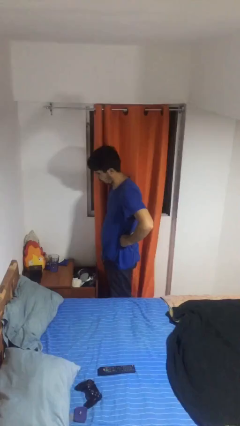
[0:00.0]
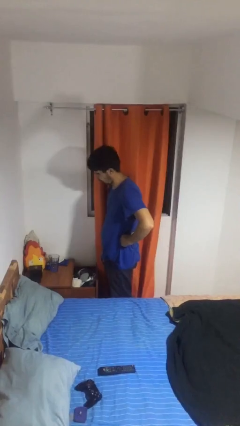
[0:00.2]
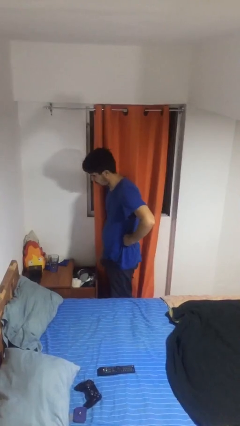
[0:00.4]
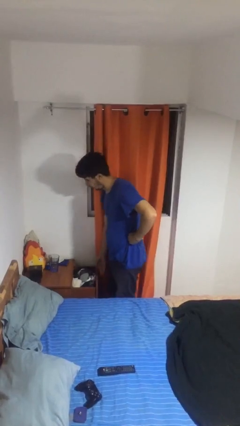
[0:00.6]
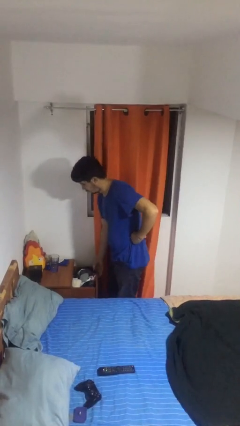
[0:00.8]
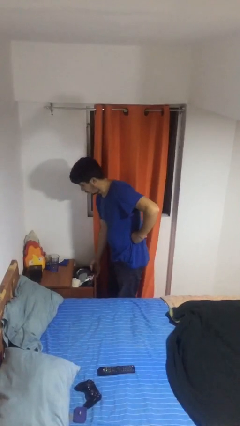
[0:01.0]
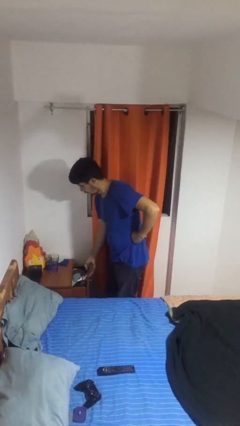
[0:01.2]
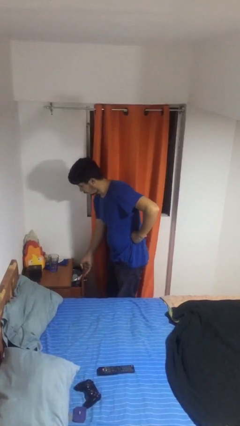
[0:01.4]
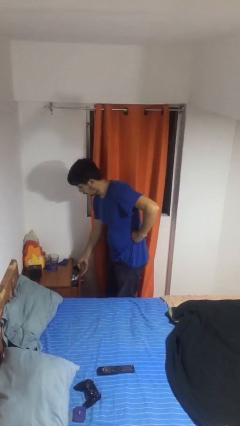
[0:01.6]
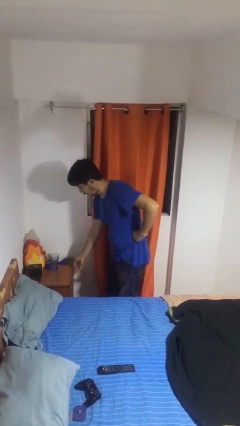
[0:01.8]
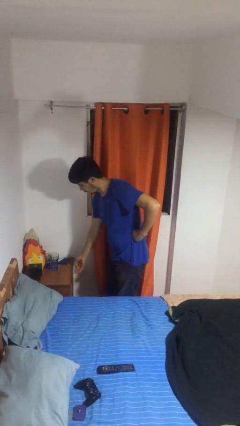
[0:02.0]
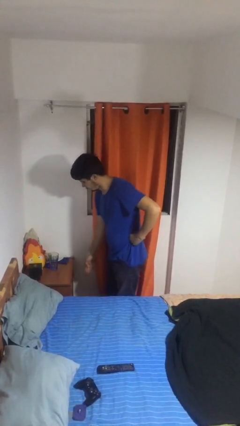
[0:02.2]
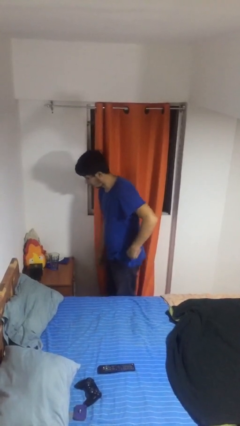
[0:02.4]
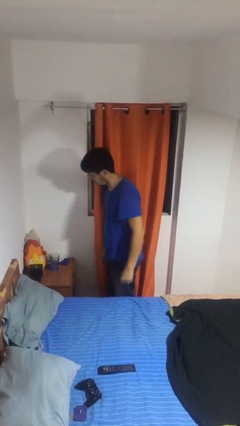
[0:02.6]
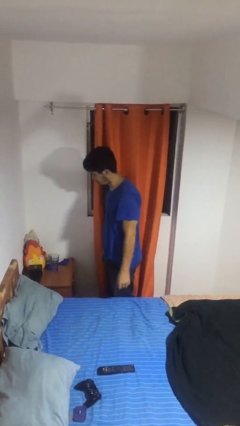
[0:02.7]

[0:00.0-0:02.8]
person closes dresser drawer

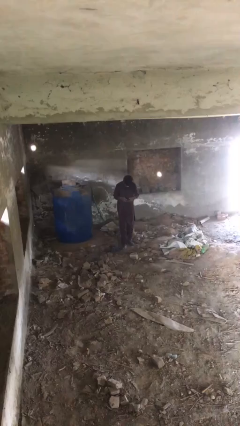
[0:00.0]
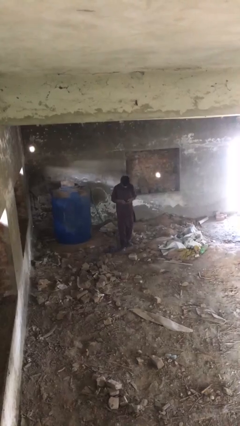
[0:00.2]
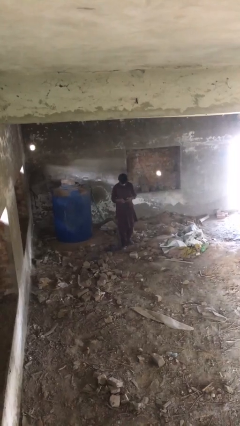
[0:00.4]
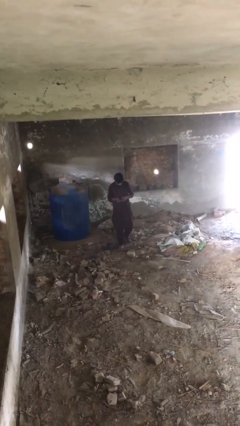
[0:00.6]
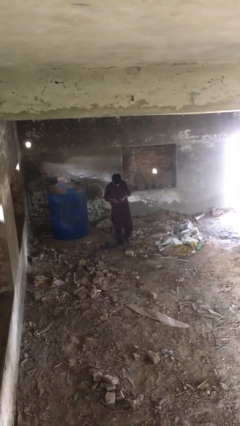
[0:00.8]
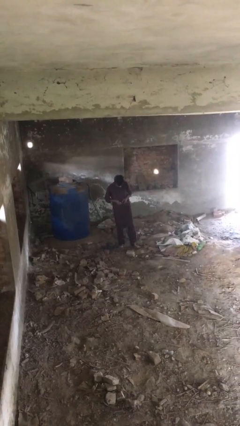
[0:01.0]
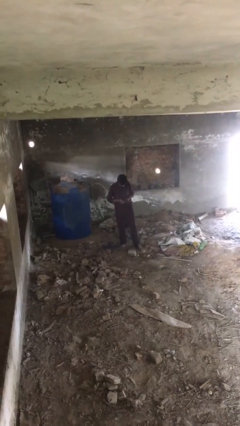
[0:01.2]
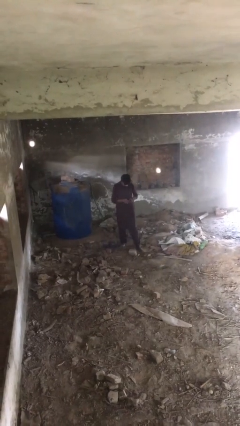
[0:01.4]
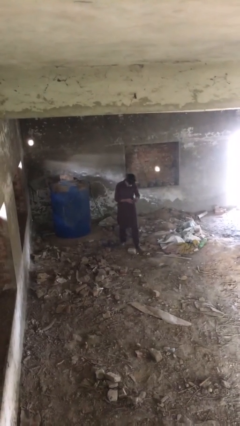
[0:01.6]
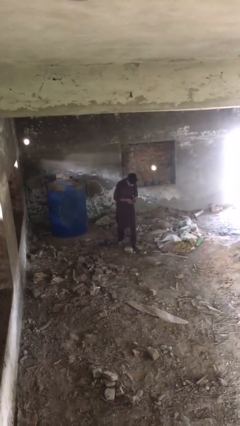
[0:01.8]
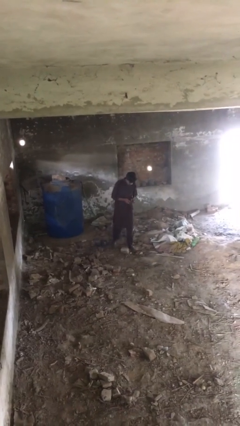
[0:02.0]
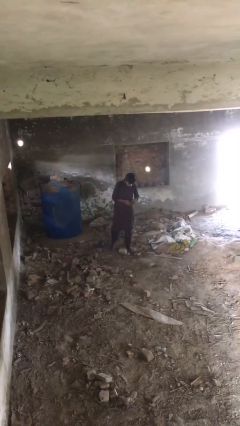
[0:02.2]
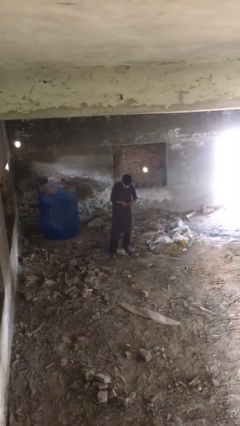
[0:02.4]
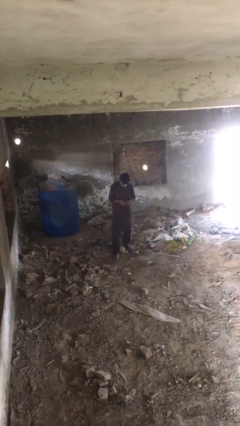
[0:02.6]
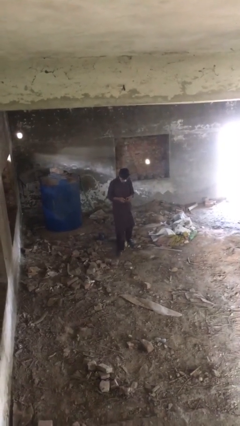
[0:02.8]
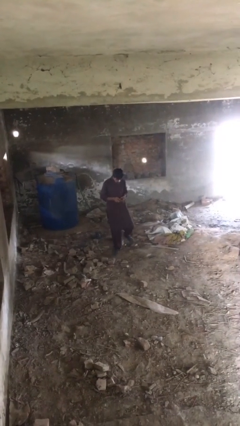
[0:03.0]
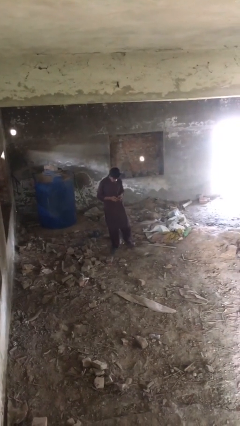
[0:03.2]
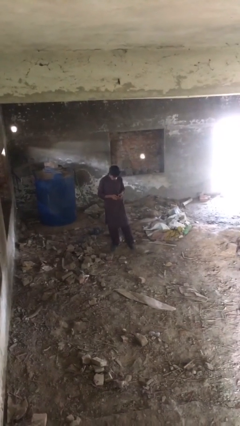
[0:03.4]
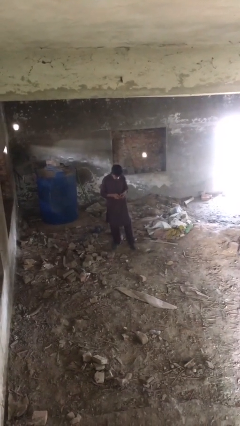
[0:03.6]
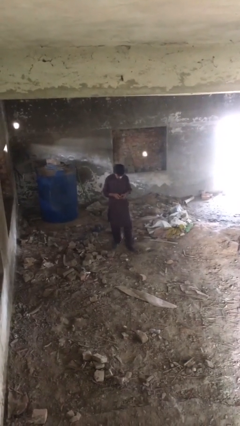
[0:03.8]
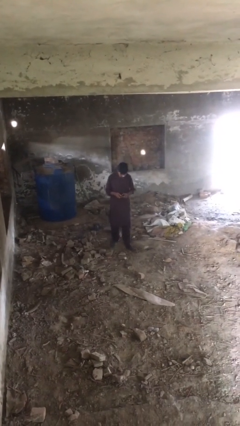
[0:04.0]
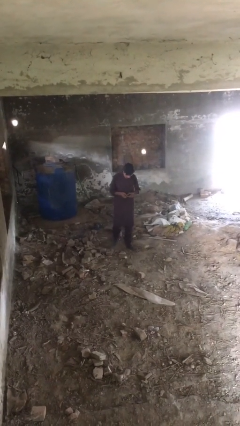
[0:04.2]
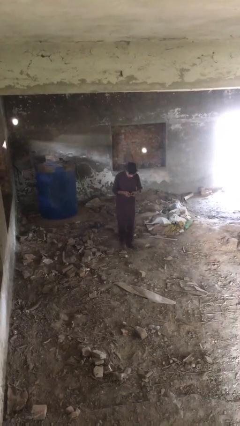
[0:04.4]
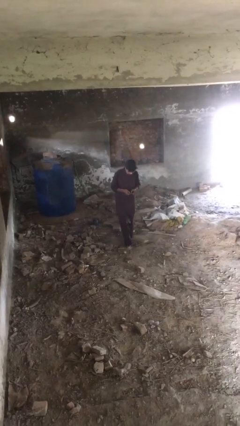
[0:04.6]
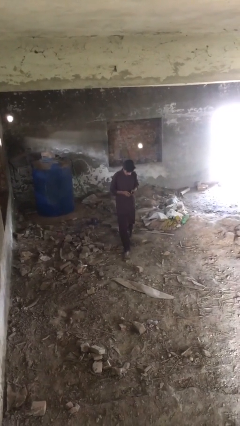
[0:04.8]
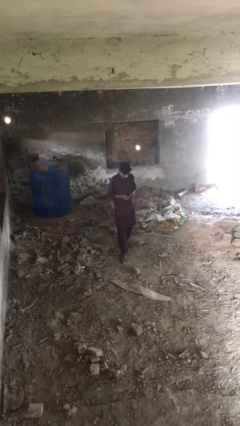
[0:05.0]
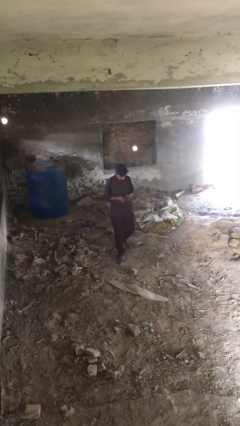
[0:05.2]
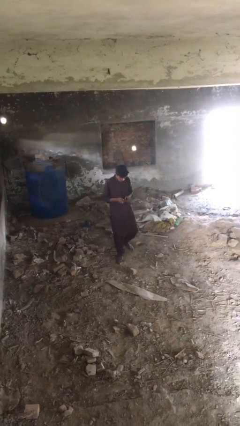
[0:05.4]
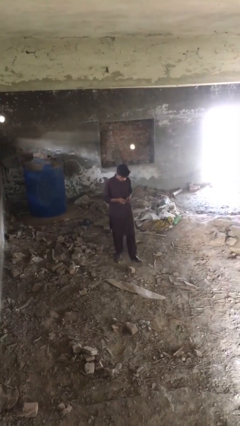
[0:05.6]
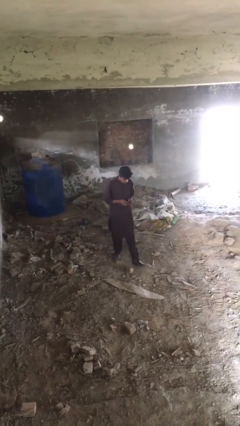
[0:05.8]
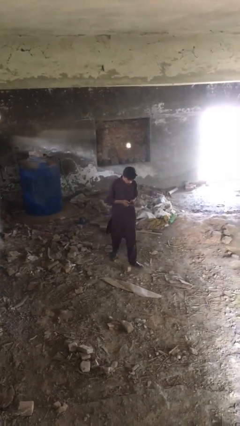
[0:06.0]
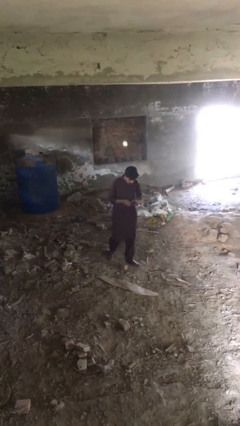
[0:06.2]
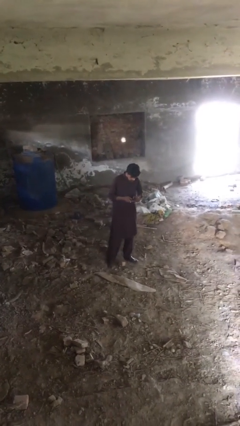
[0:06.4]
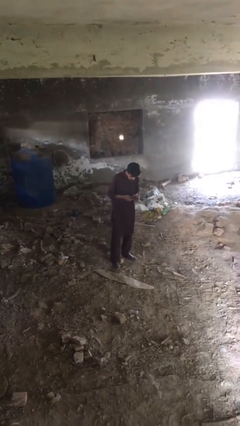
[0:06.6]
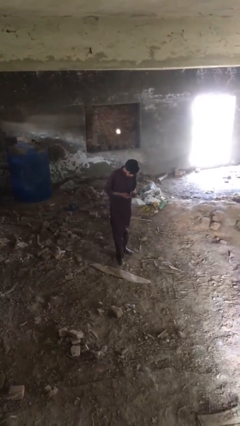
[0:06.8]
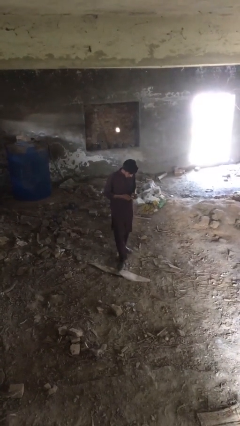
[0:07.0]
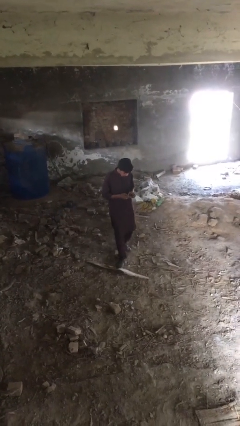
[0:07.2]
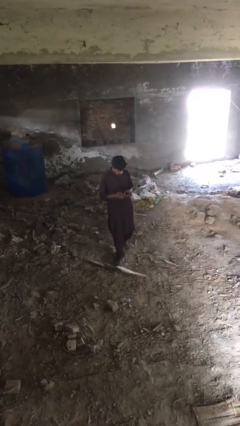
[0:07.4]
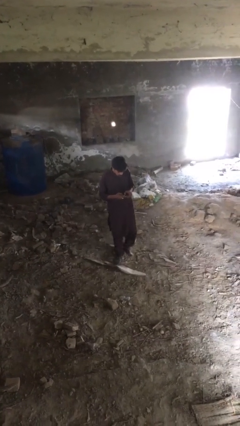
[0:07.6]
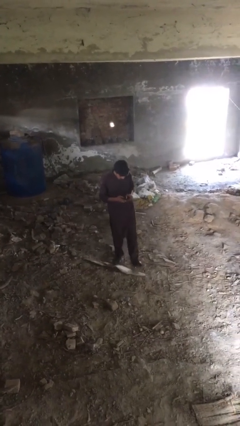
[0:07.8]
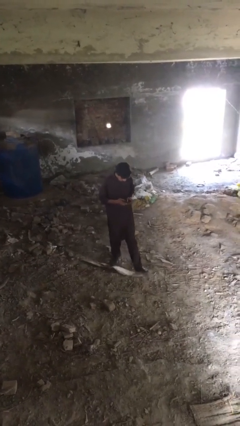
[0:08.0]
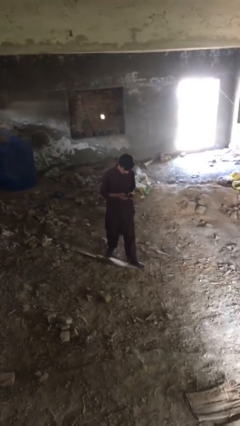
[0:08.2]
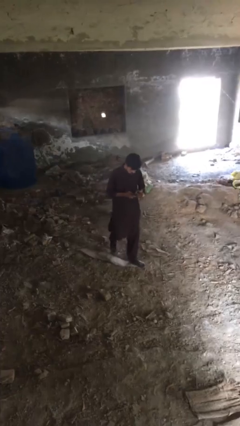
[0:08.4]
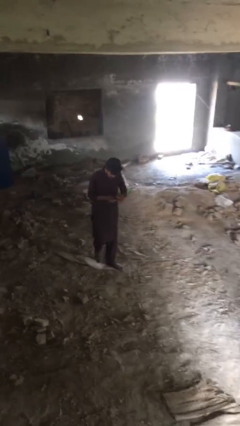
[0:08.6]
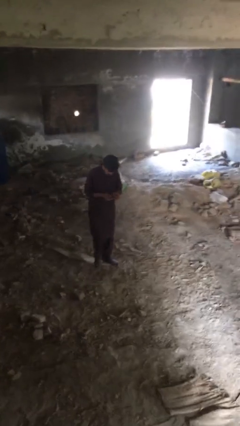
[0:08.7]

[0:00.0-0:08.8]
person texts on phone

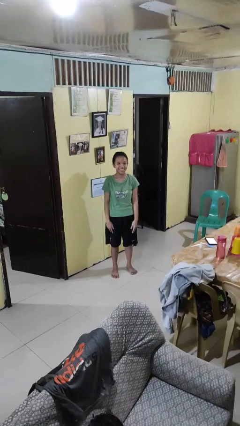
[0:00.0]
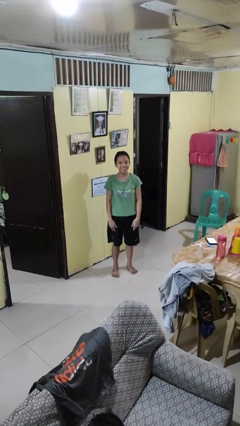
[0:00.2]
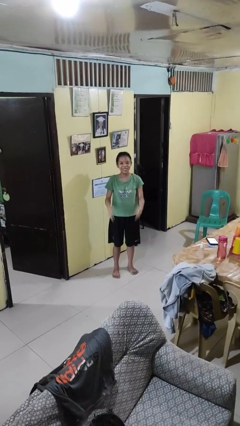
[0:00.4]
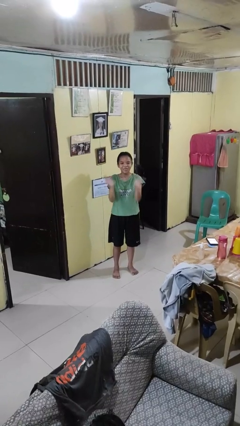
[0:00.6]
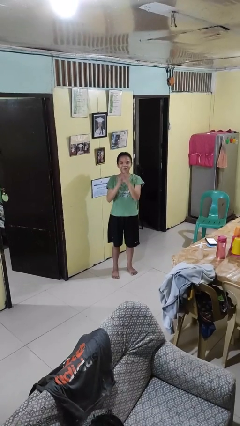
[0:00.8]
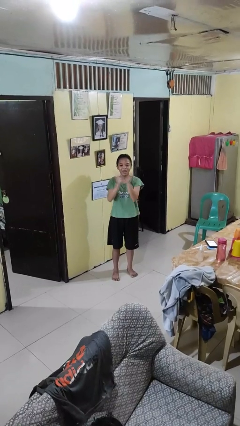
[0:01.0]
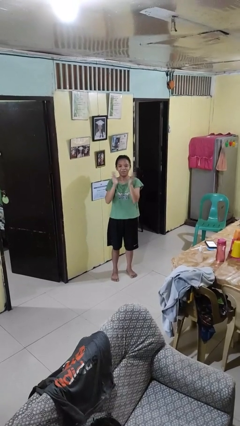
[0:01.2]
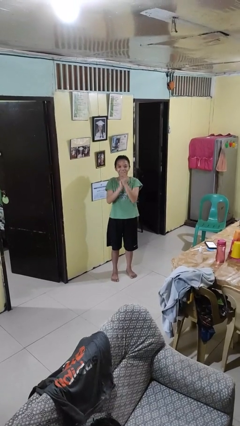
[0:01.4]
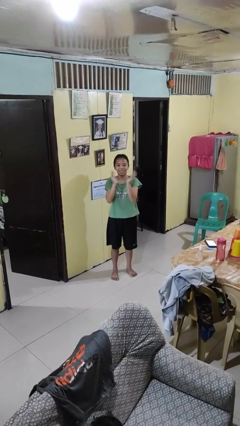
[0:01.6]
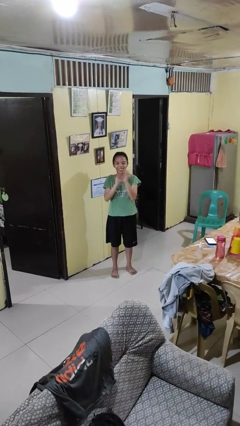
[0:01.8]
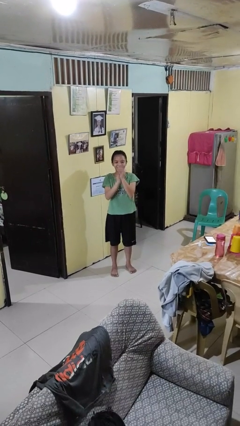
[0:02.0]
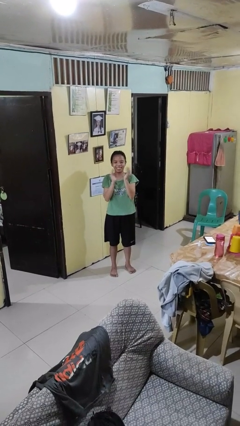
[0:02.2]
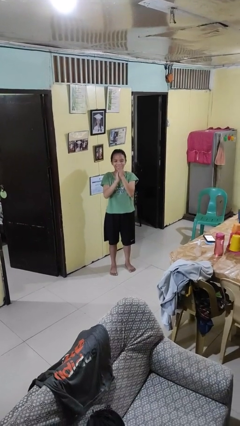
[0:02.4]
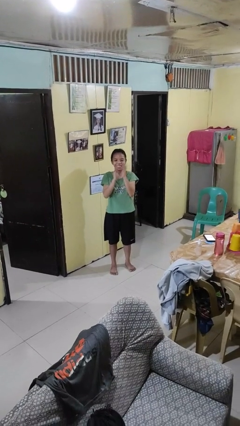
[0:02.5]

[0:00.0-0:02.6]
person claps hands

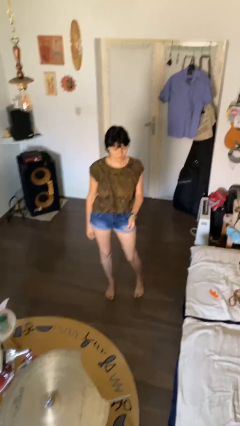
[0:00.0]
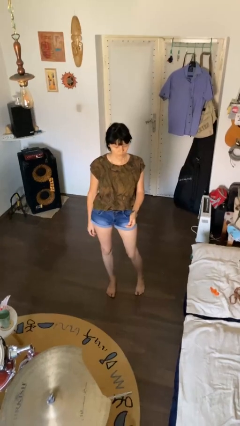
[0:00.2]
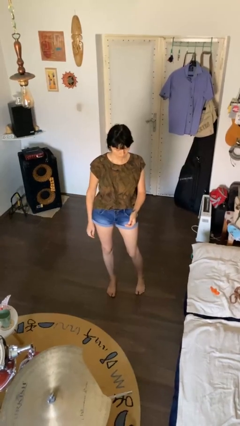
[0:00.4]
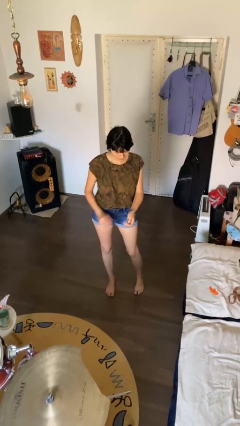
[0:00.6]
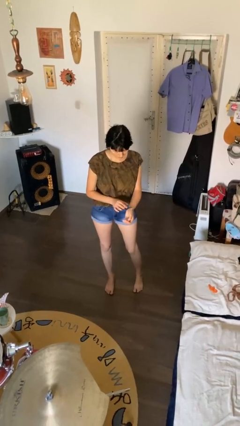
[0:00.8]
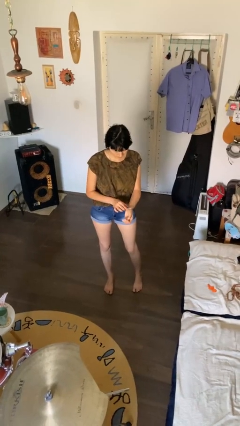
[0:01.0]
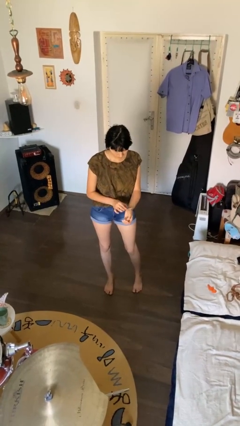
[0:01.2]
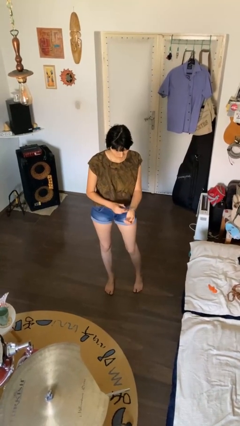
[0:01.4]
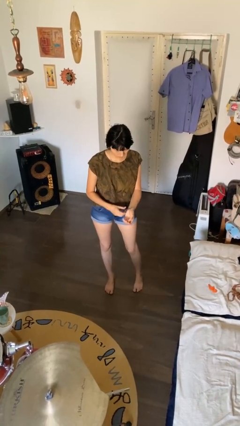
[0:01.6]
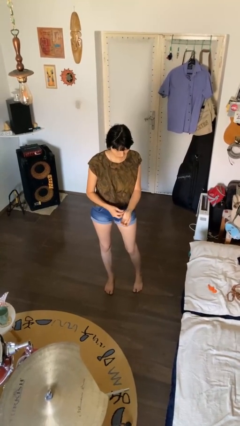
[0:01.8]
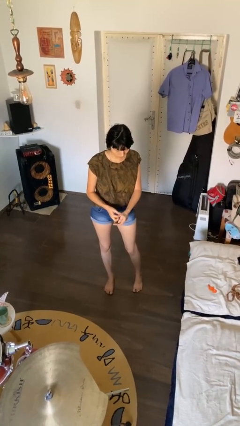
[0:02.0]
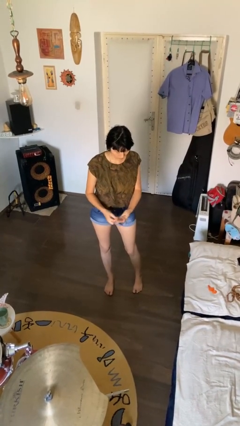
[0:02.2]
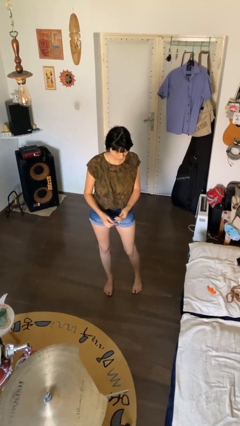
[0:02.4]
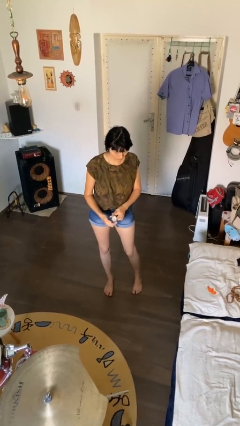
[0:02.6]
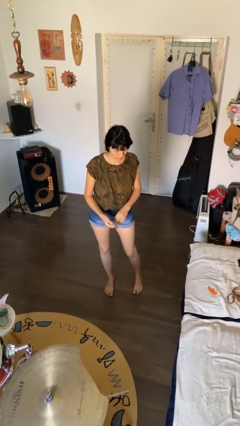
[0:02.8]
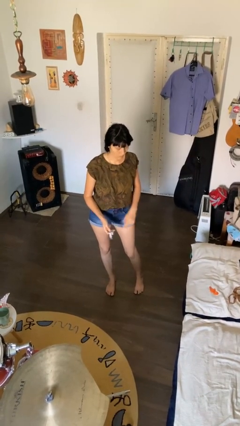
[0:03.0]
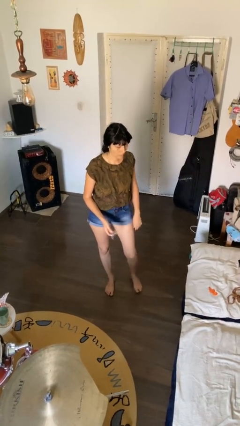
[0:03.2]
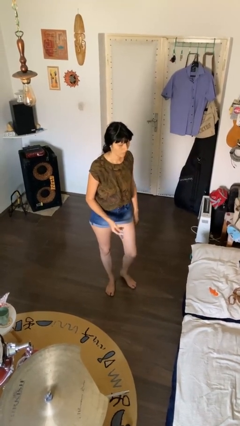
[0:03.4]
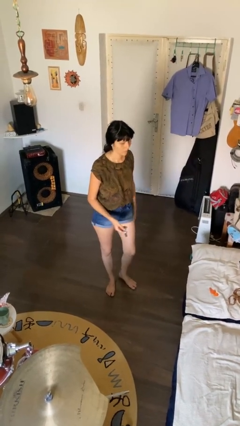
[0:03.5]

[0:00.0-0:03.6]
person takes off wristwatch
